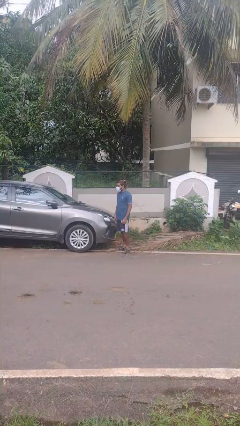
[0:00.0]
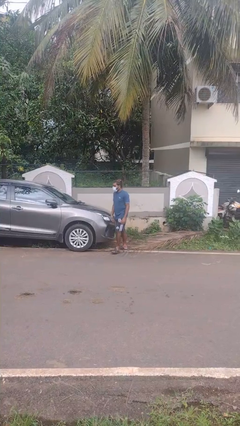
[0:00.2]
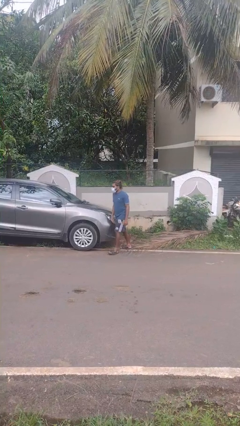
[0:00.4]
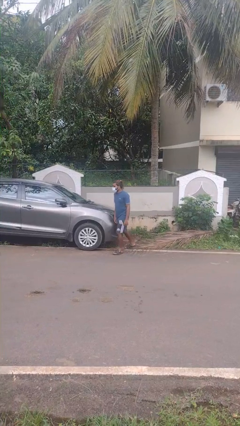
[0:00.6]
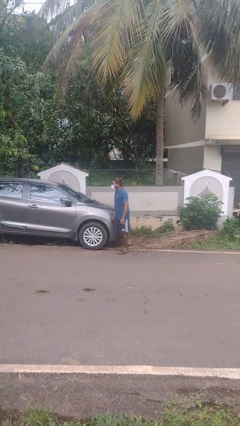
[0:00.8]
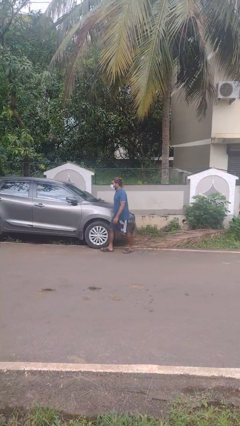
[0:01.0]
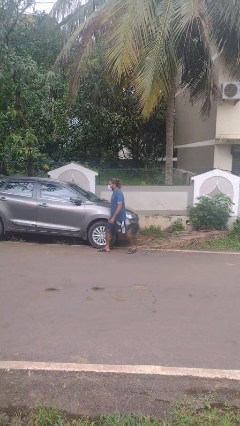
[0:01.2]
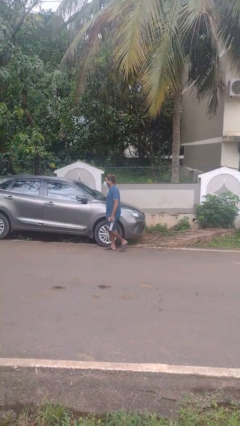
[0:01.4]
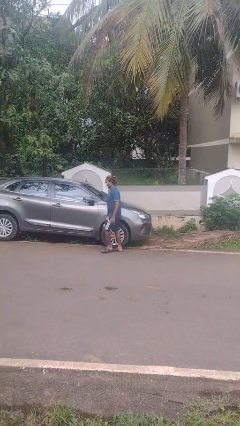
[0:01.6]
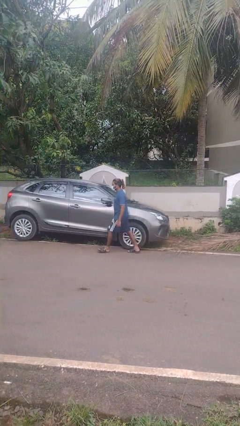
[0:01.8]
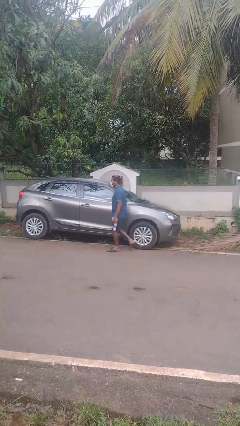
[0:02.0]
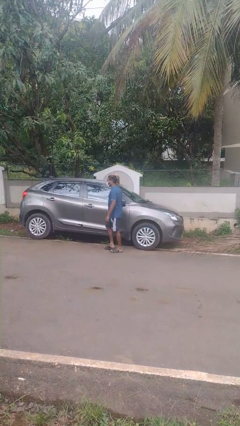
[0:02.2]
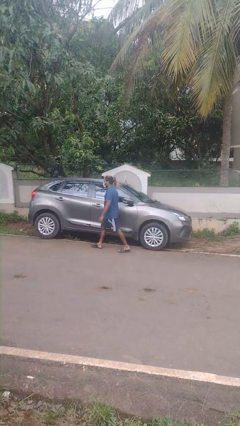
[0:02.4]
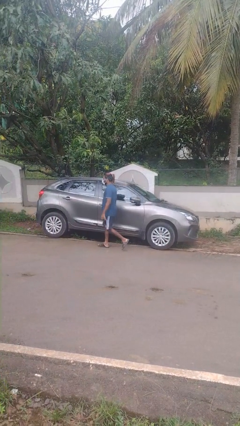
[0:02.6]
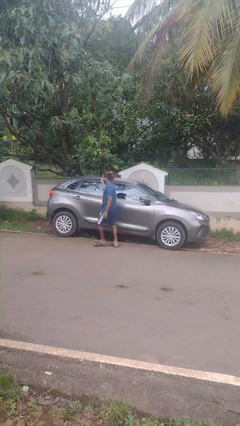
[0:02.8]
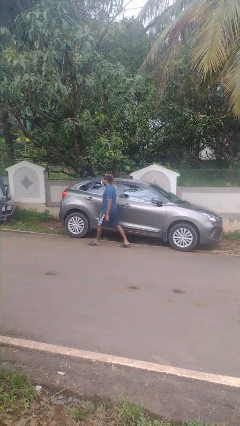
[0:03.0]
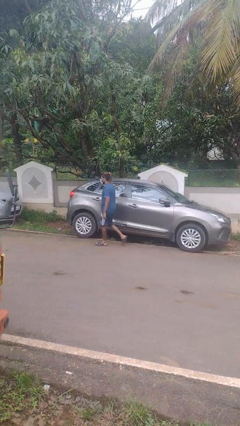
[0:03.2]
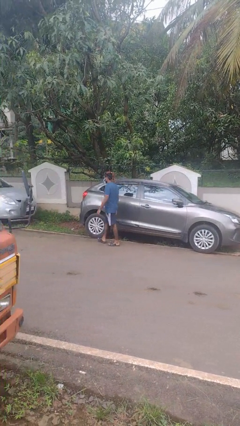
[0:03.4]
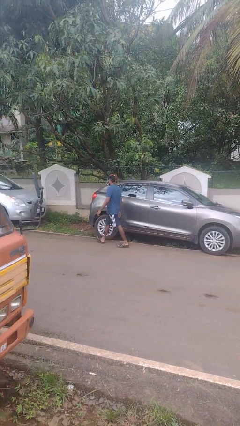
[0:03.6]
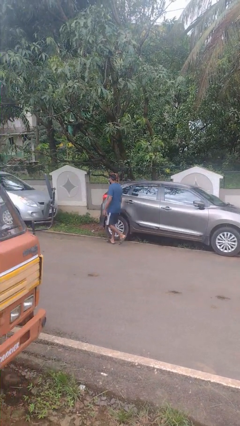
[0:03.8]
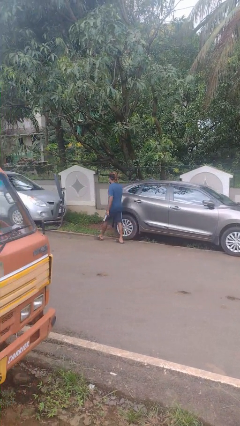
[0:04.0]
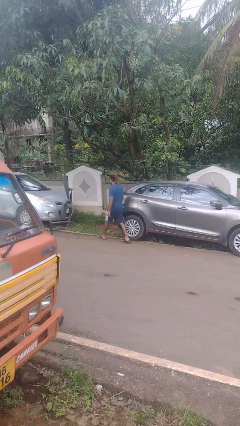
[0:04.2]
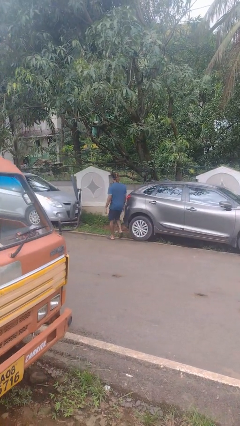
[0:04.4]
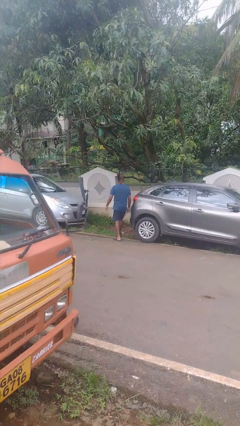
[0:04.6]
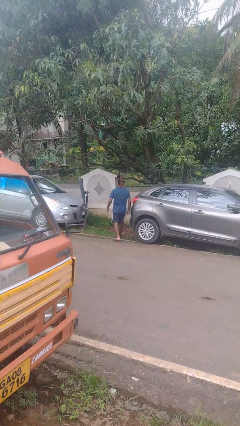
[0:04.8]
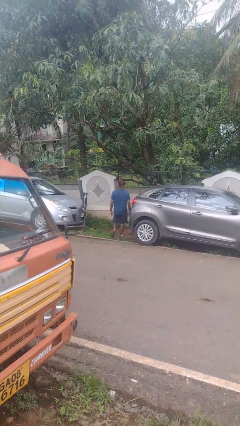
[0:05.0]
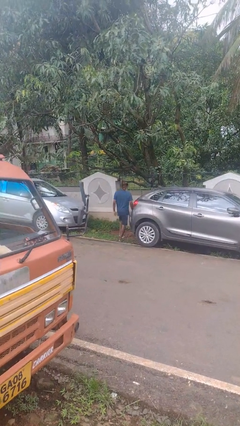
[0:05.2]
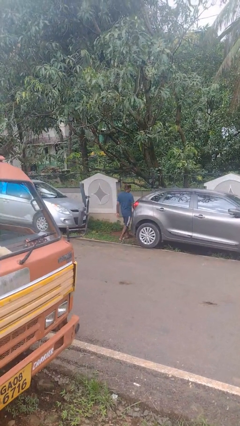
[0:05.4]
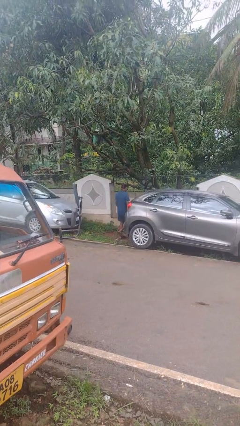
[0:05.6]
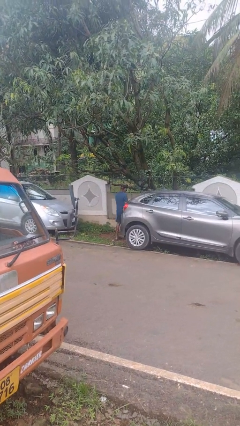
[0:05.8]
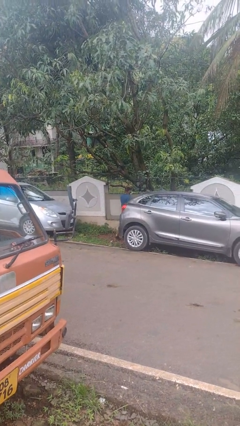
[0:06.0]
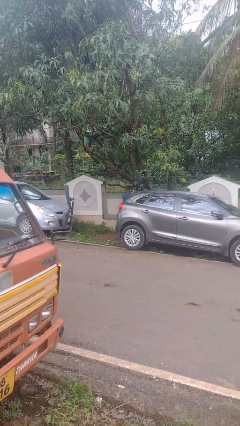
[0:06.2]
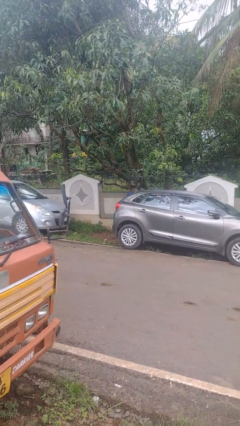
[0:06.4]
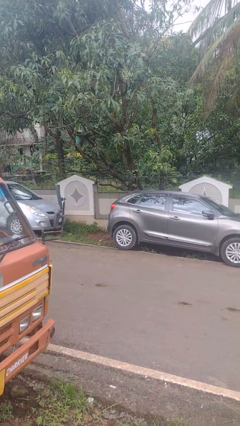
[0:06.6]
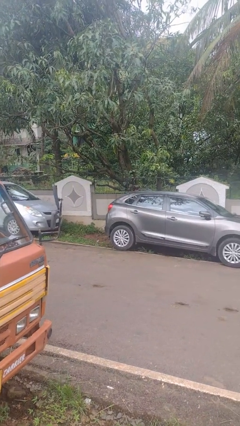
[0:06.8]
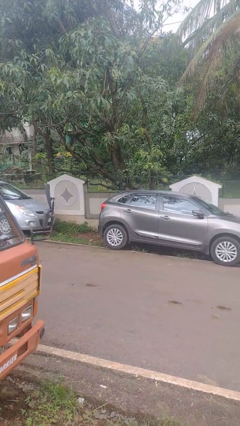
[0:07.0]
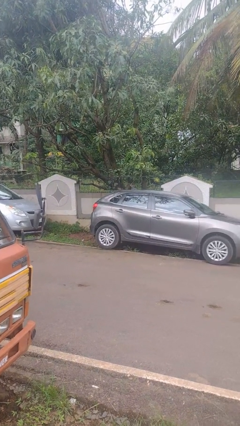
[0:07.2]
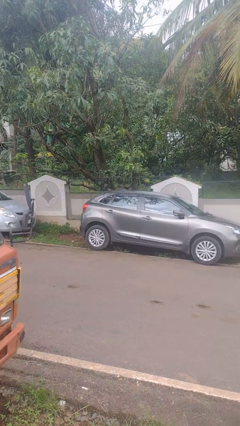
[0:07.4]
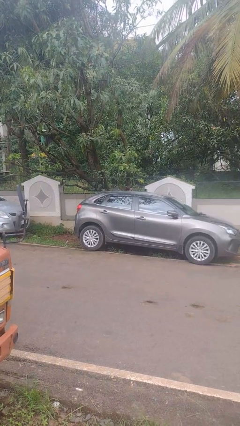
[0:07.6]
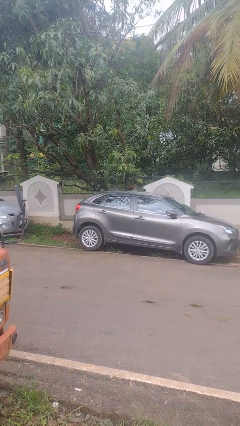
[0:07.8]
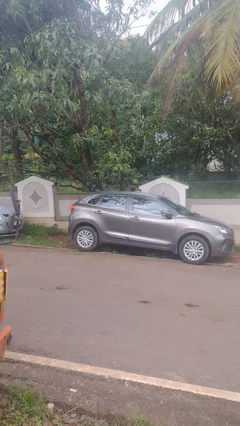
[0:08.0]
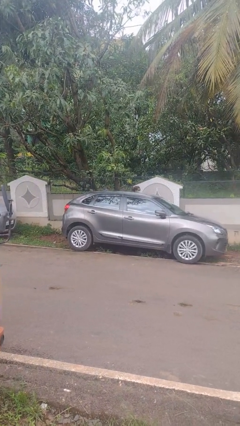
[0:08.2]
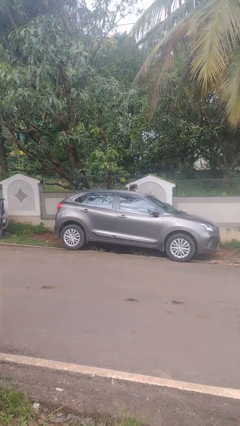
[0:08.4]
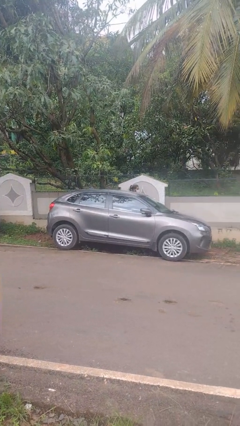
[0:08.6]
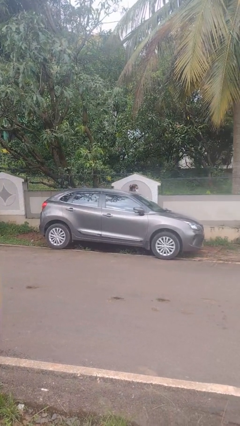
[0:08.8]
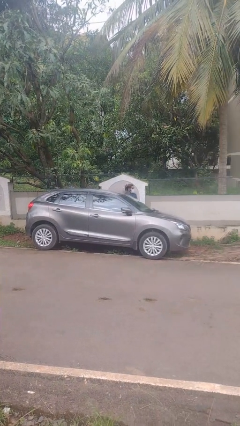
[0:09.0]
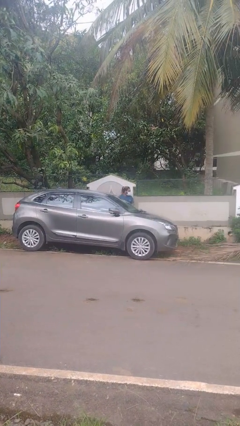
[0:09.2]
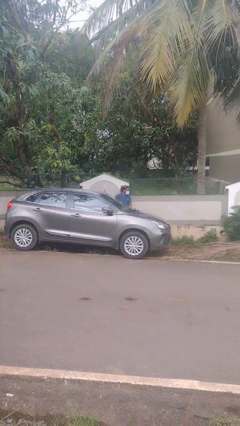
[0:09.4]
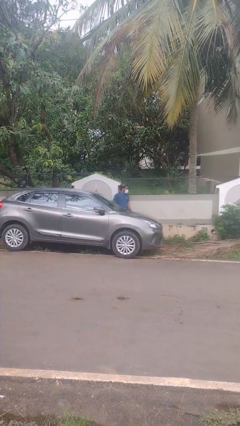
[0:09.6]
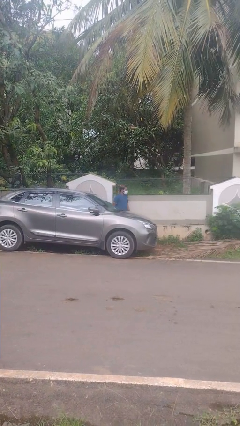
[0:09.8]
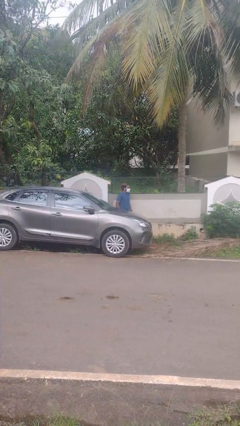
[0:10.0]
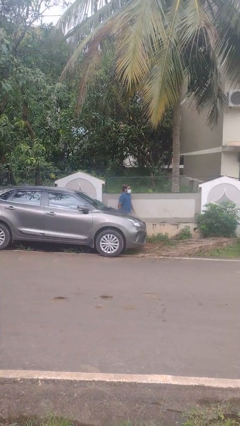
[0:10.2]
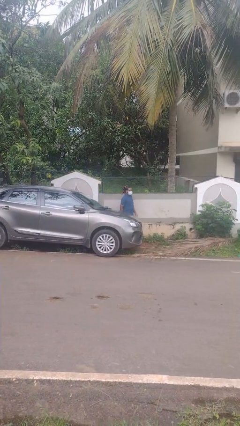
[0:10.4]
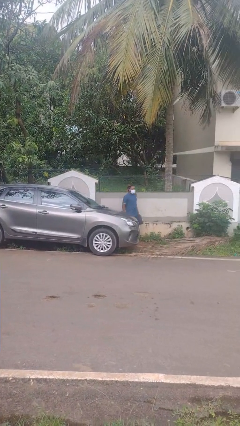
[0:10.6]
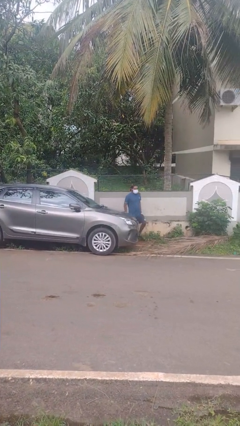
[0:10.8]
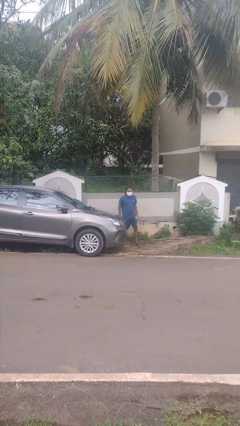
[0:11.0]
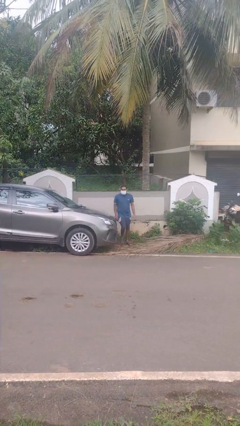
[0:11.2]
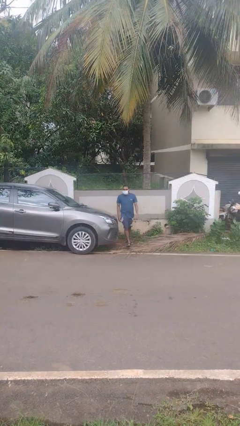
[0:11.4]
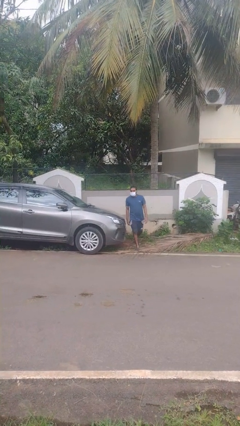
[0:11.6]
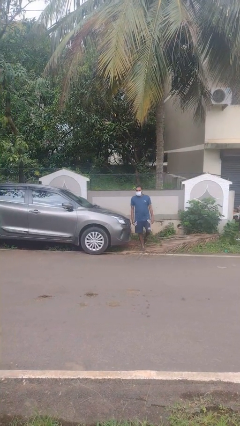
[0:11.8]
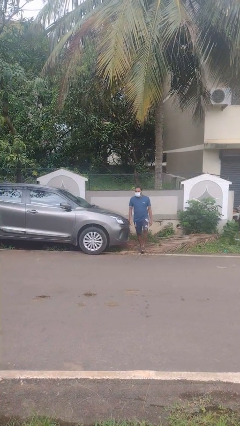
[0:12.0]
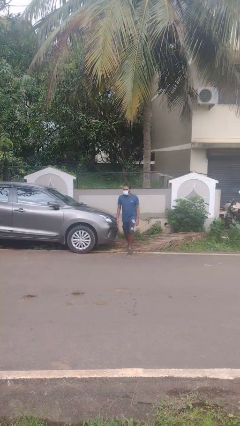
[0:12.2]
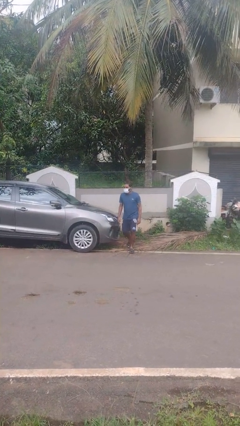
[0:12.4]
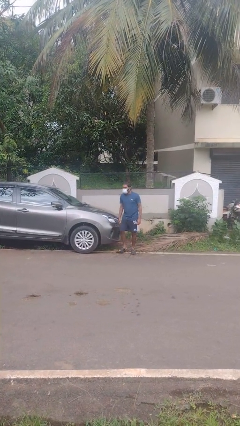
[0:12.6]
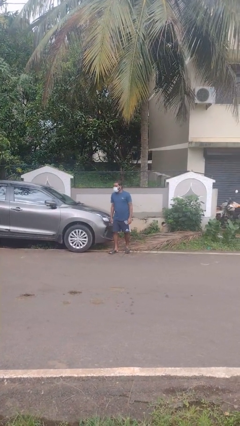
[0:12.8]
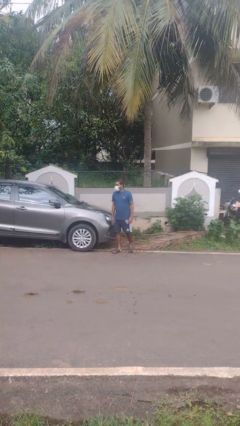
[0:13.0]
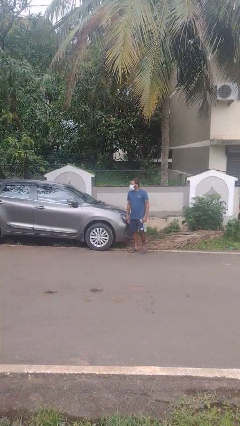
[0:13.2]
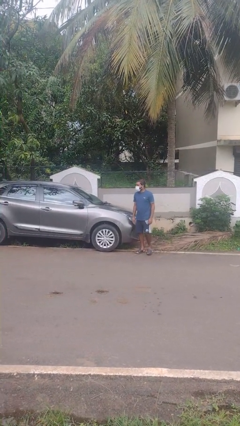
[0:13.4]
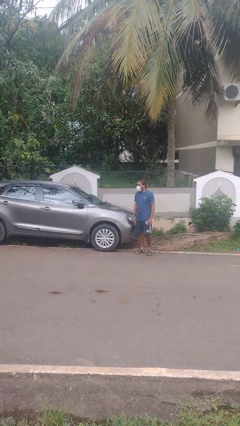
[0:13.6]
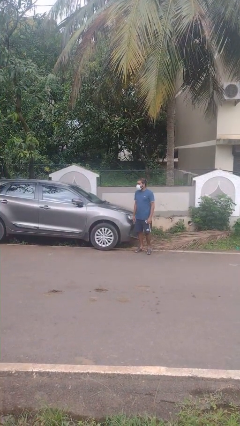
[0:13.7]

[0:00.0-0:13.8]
person walks around car

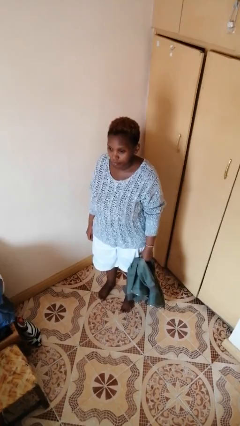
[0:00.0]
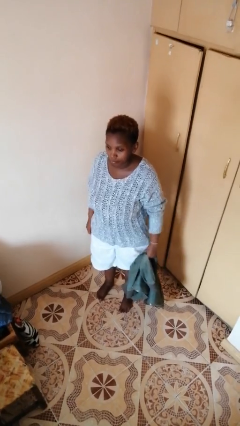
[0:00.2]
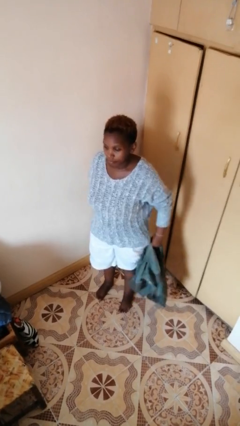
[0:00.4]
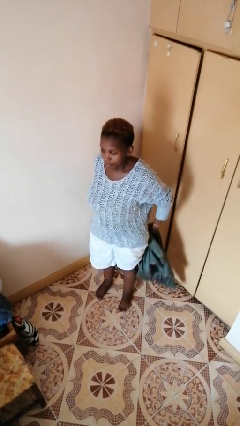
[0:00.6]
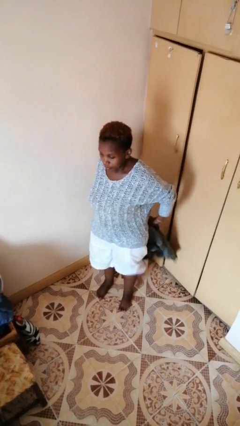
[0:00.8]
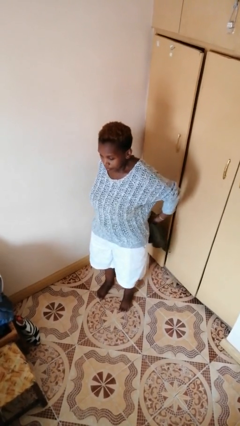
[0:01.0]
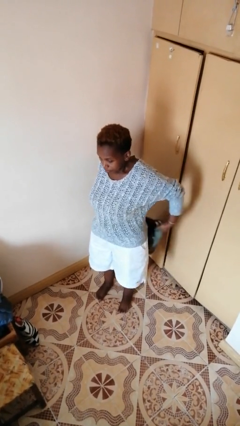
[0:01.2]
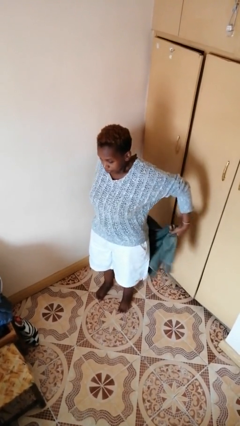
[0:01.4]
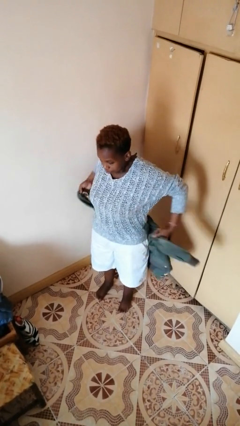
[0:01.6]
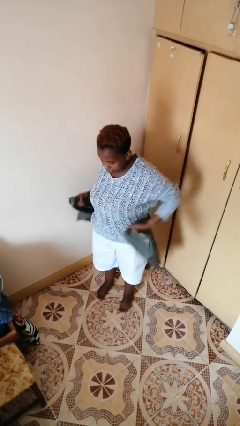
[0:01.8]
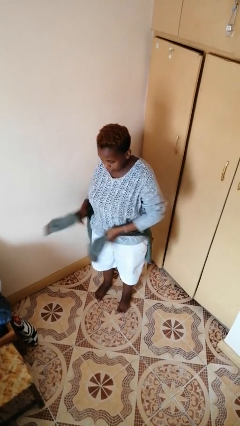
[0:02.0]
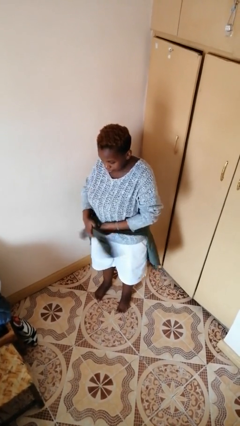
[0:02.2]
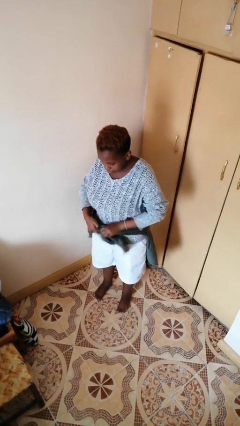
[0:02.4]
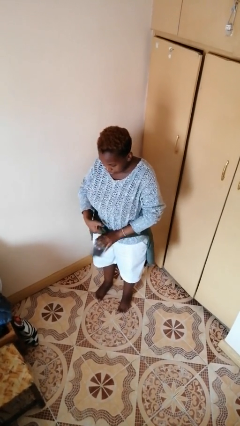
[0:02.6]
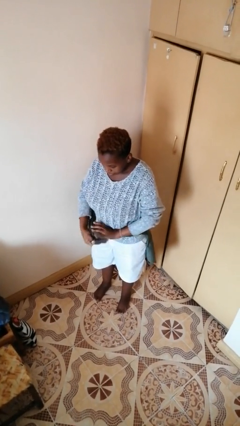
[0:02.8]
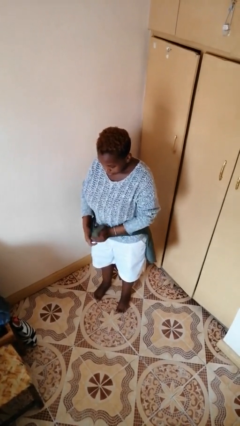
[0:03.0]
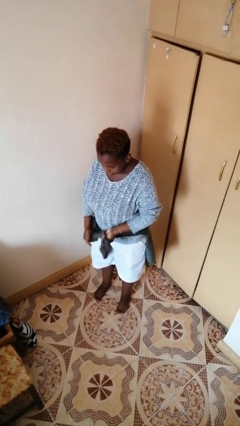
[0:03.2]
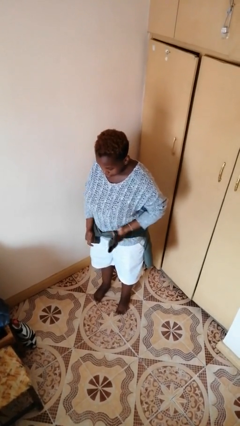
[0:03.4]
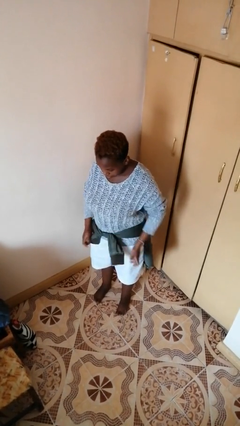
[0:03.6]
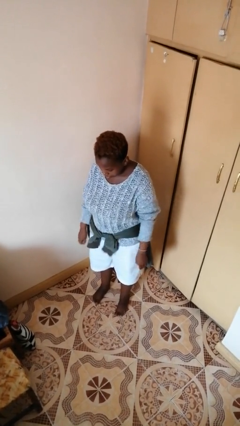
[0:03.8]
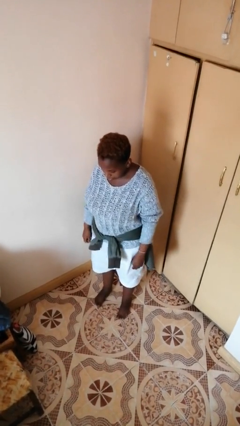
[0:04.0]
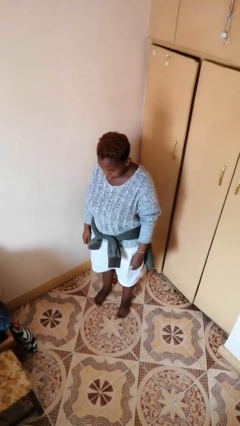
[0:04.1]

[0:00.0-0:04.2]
person ties jacket around waist
